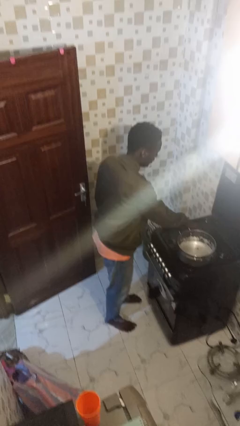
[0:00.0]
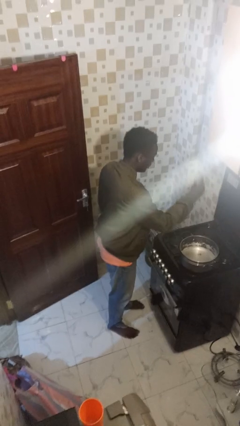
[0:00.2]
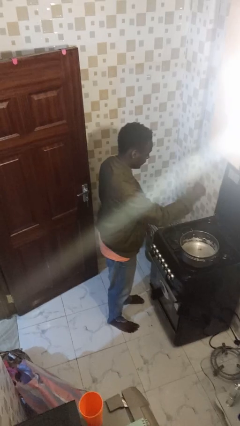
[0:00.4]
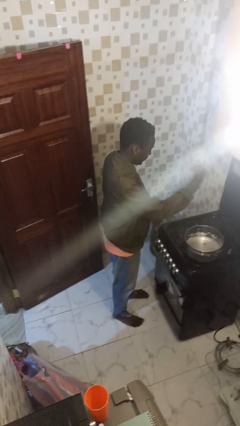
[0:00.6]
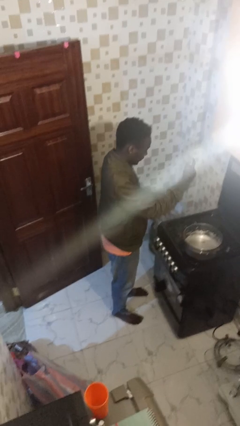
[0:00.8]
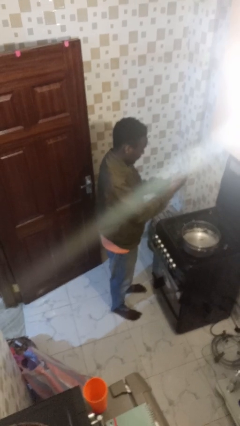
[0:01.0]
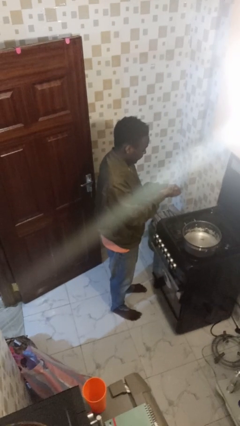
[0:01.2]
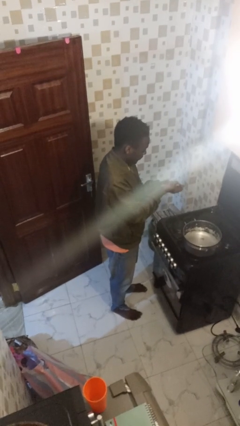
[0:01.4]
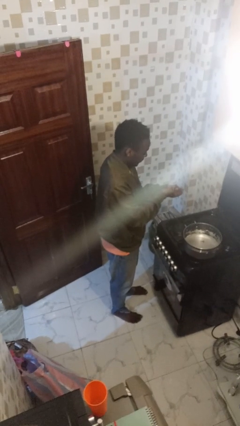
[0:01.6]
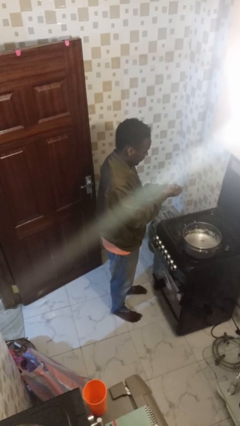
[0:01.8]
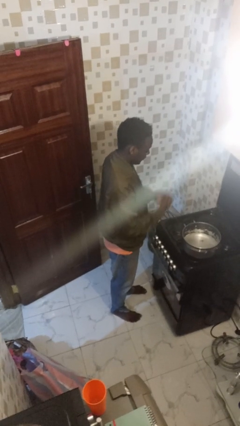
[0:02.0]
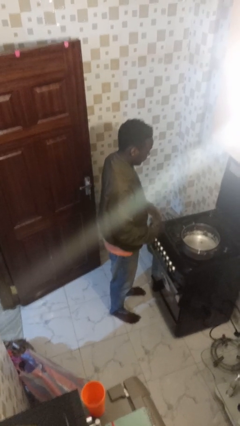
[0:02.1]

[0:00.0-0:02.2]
person burns hand

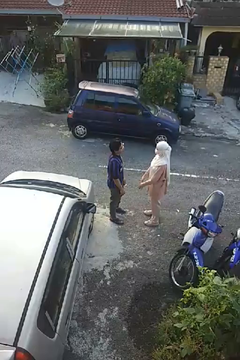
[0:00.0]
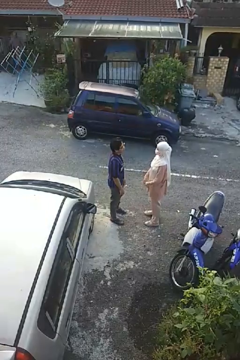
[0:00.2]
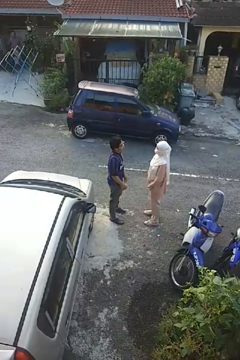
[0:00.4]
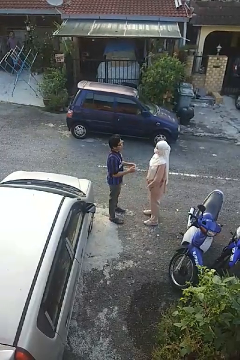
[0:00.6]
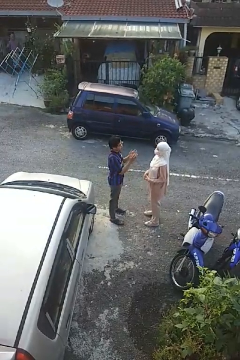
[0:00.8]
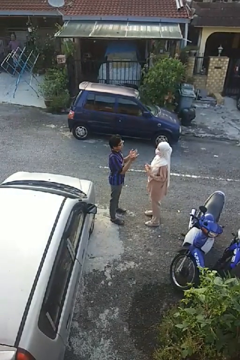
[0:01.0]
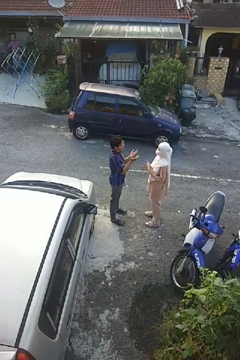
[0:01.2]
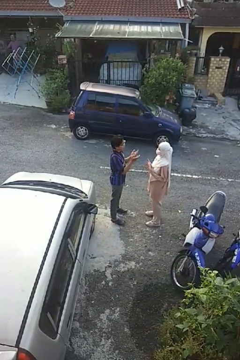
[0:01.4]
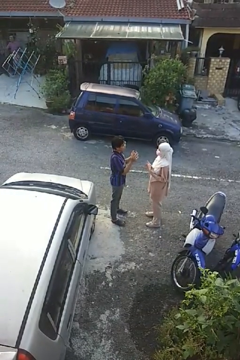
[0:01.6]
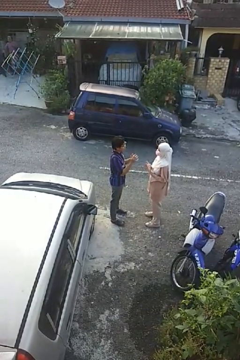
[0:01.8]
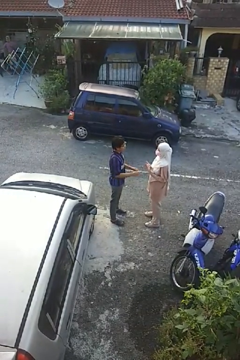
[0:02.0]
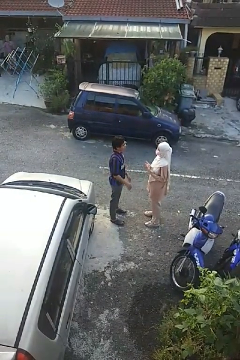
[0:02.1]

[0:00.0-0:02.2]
person talks to person

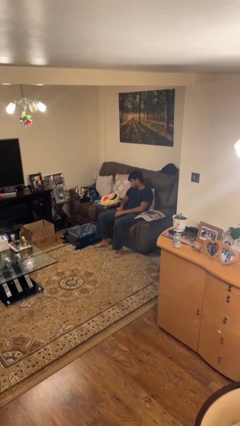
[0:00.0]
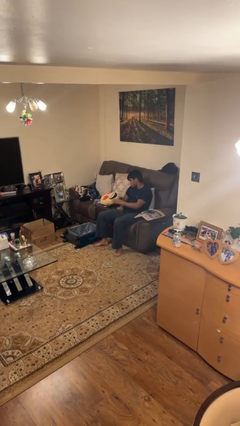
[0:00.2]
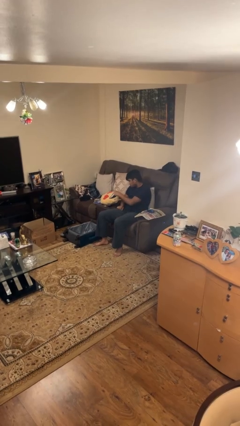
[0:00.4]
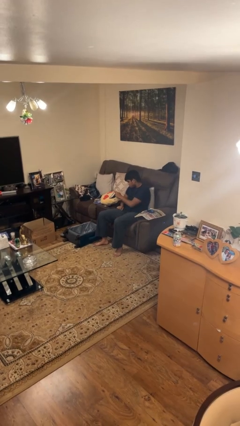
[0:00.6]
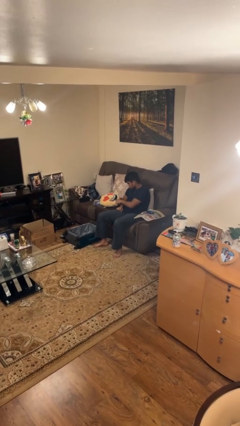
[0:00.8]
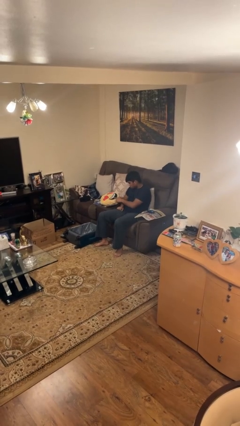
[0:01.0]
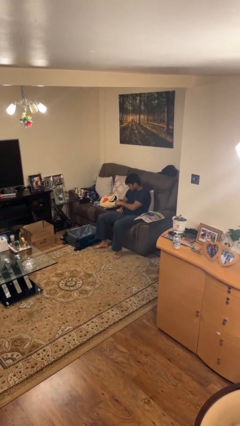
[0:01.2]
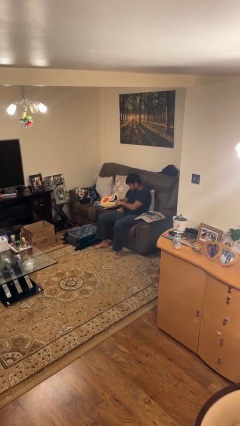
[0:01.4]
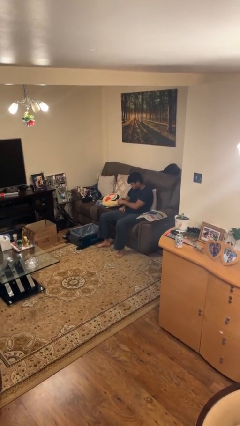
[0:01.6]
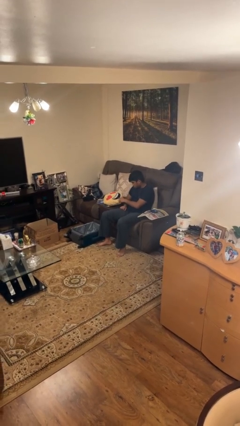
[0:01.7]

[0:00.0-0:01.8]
person taps object with finger

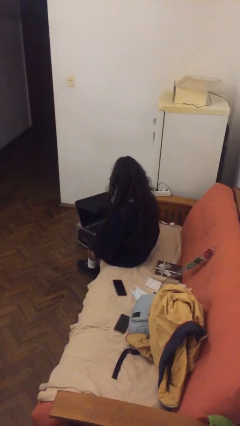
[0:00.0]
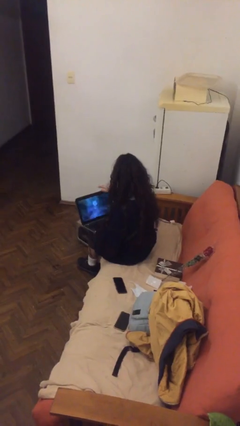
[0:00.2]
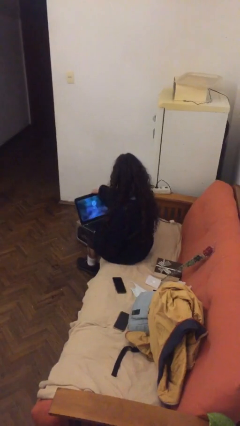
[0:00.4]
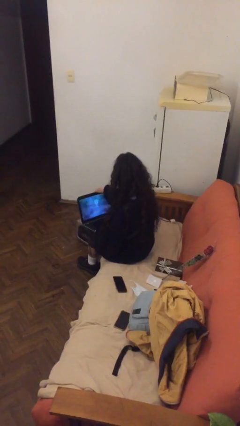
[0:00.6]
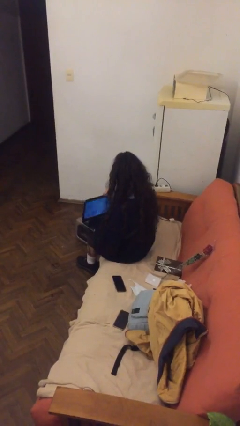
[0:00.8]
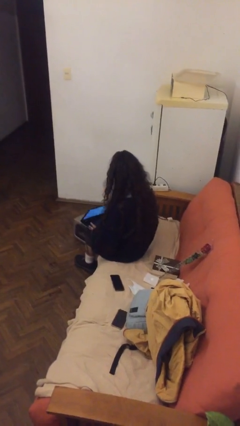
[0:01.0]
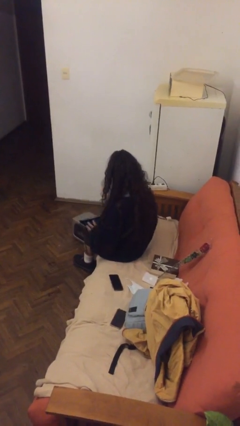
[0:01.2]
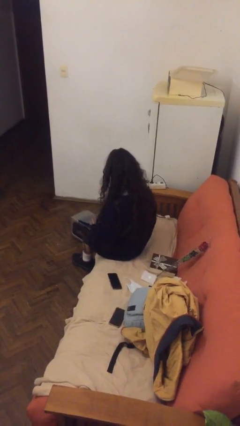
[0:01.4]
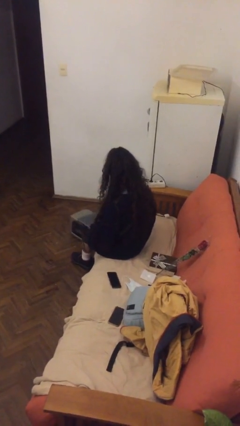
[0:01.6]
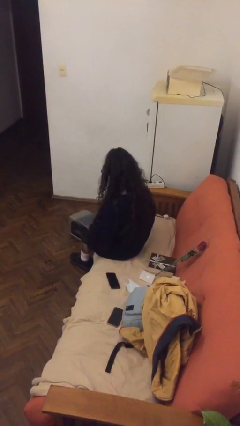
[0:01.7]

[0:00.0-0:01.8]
person closes laptop

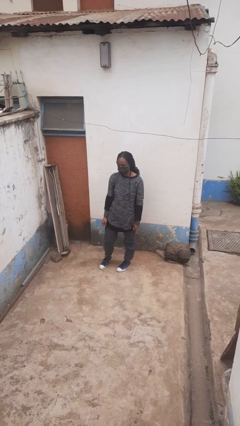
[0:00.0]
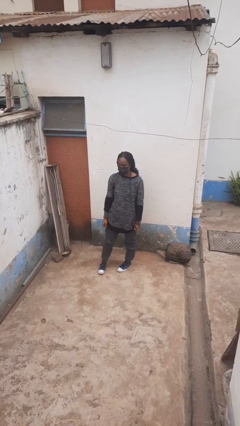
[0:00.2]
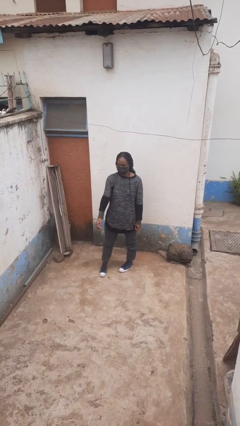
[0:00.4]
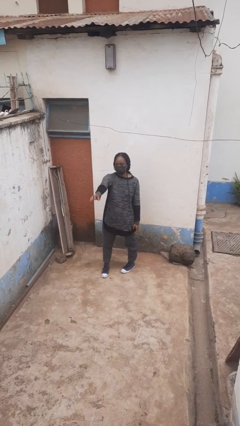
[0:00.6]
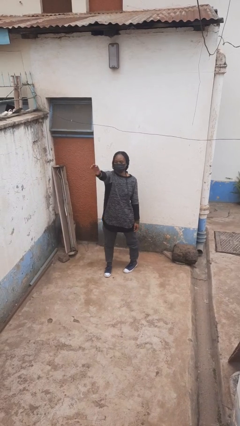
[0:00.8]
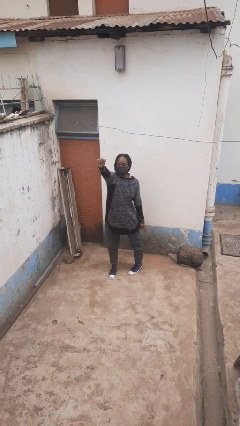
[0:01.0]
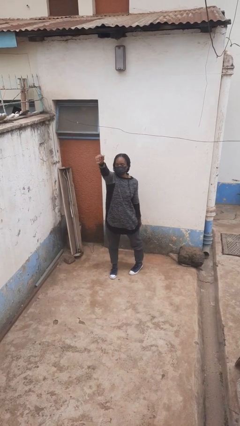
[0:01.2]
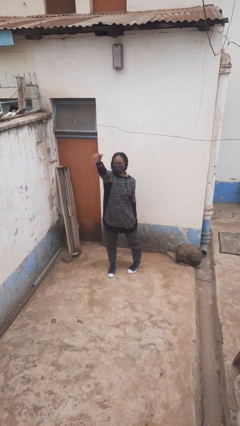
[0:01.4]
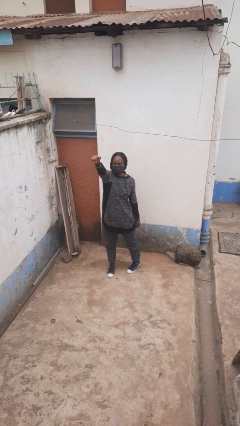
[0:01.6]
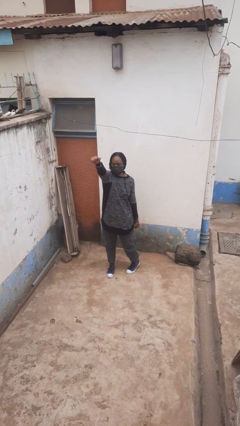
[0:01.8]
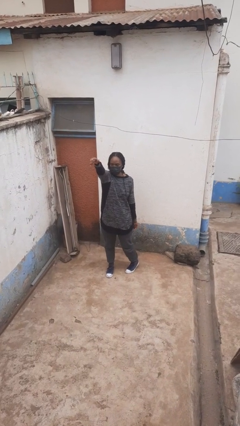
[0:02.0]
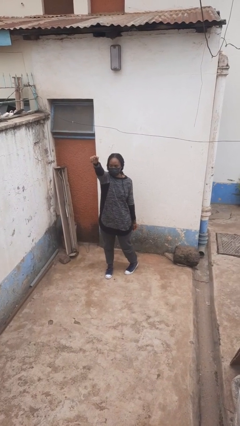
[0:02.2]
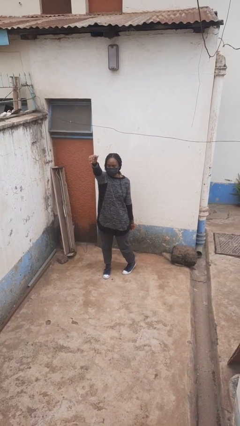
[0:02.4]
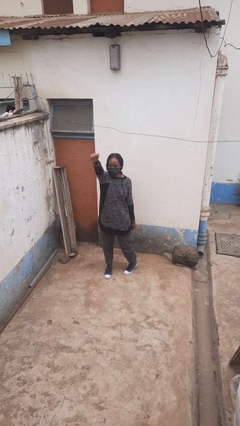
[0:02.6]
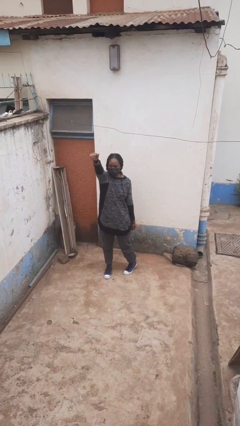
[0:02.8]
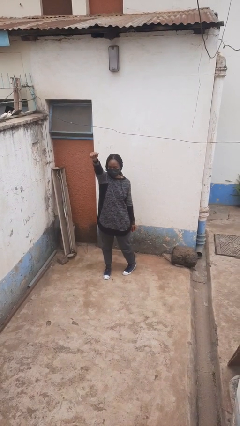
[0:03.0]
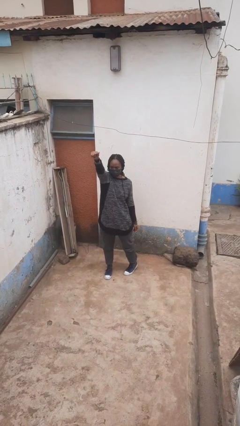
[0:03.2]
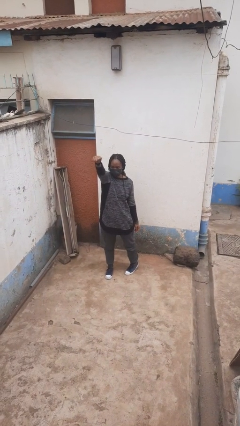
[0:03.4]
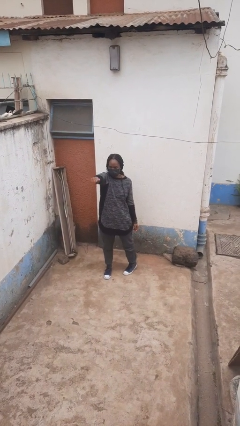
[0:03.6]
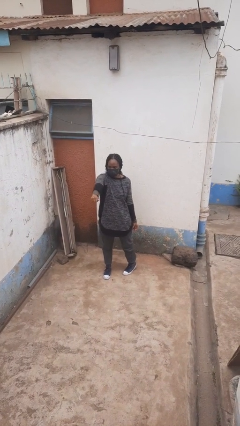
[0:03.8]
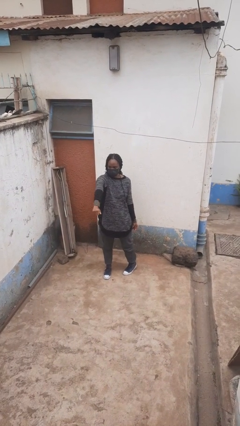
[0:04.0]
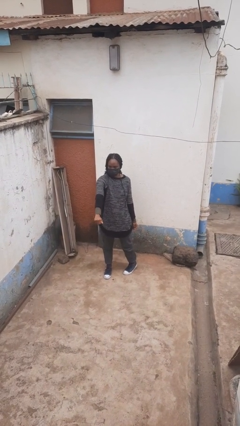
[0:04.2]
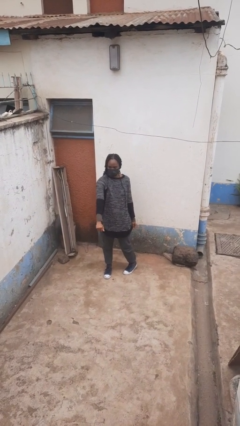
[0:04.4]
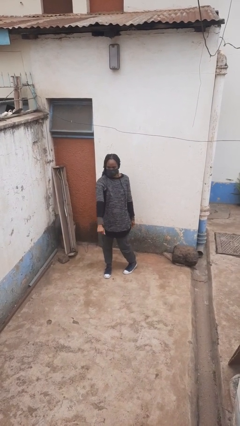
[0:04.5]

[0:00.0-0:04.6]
person gestures come here

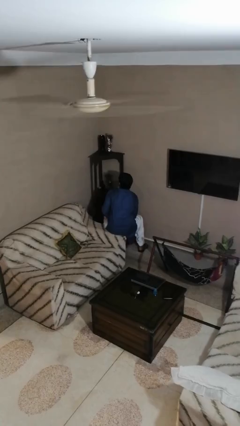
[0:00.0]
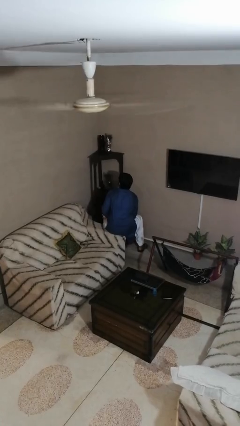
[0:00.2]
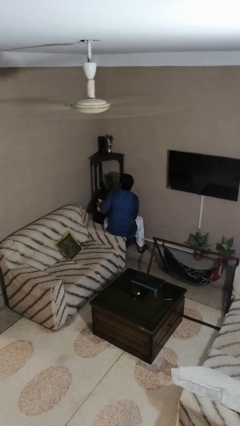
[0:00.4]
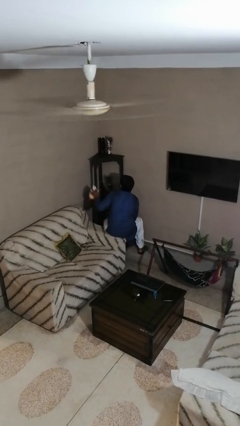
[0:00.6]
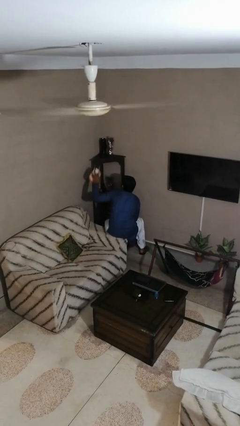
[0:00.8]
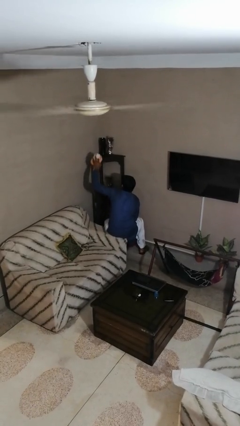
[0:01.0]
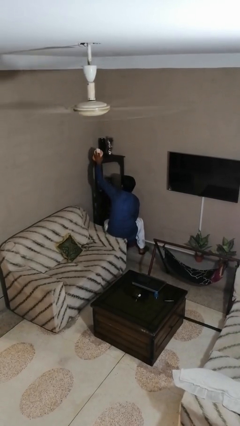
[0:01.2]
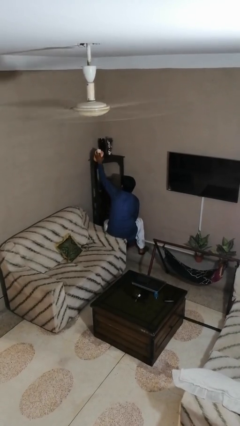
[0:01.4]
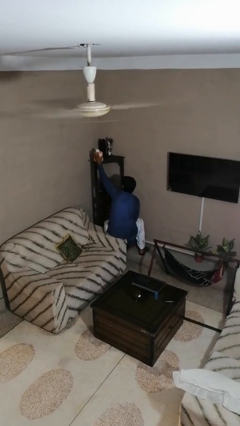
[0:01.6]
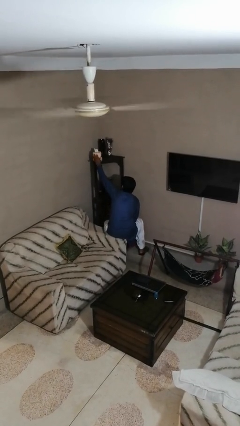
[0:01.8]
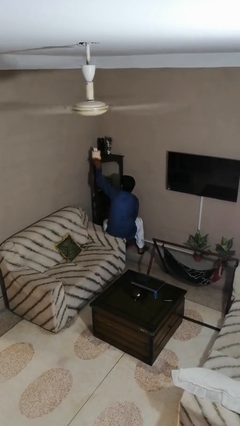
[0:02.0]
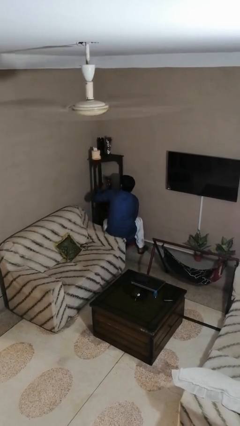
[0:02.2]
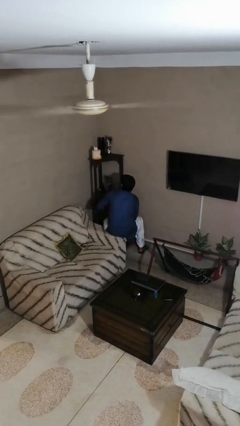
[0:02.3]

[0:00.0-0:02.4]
person puts down object on shelf

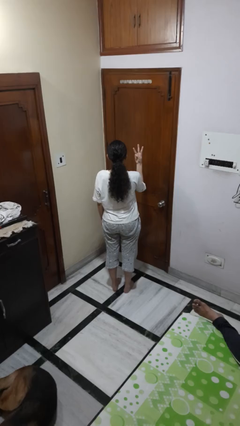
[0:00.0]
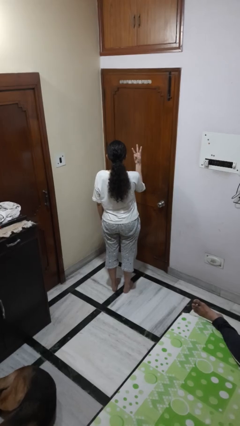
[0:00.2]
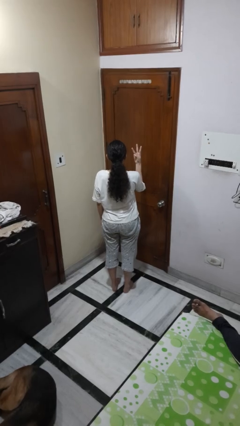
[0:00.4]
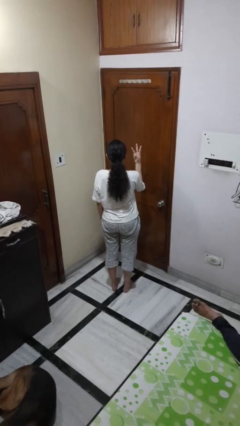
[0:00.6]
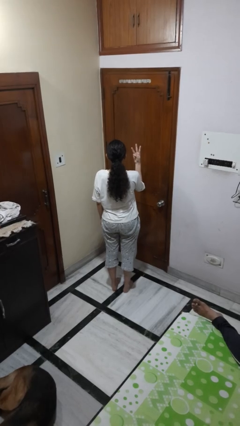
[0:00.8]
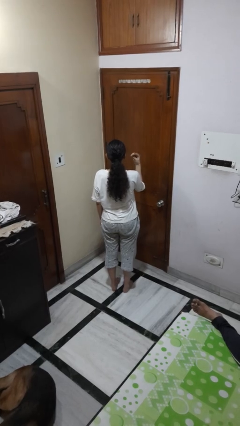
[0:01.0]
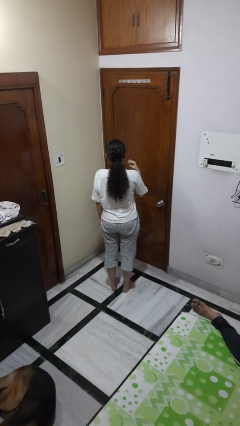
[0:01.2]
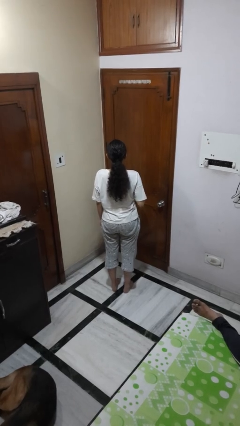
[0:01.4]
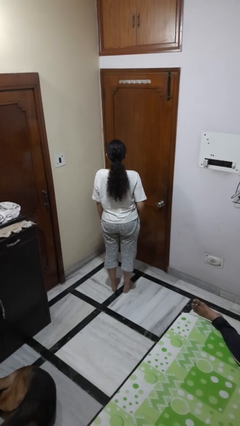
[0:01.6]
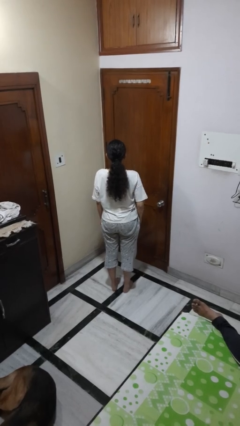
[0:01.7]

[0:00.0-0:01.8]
person gestures number three

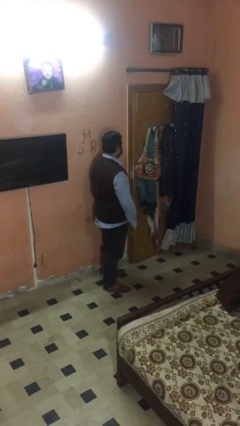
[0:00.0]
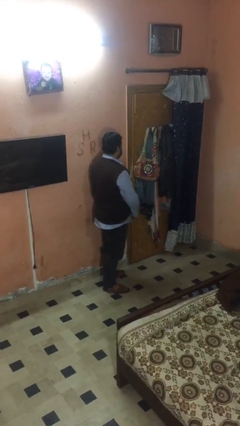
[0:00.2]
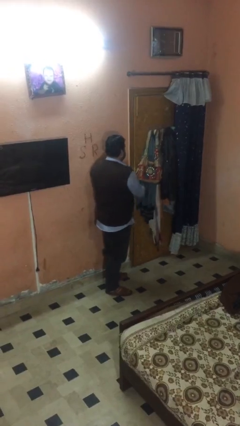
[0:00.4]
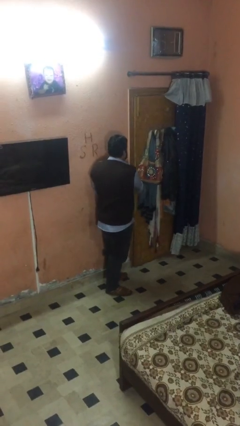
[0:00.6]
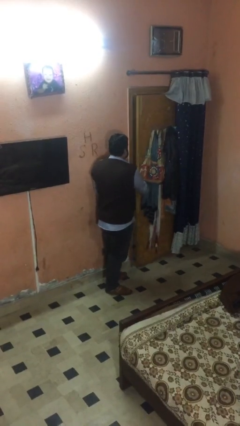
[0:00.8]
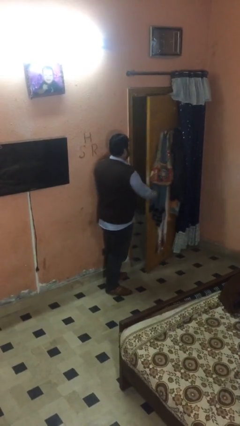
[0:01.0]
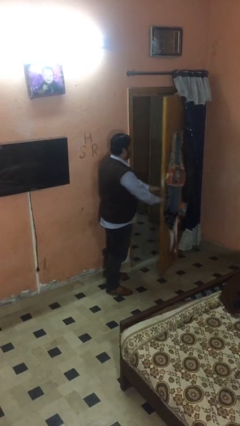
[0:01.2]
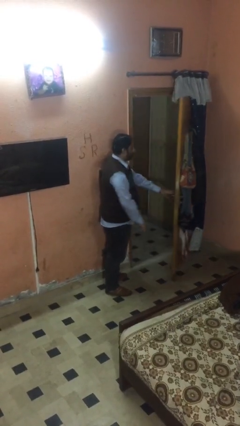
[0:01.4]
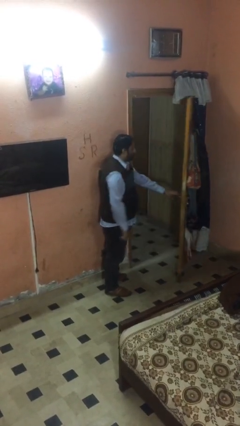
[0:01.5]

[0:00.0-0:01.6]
person opens facility door
